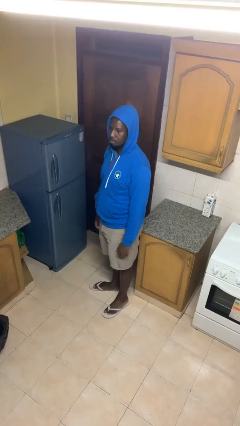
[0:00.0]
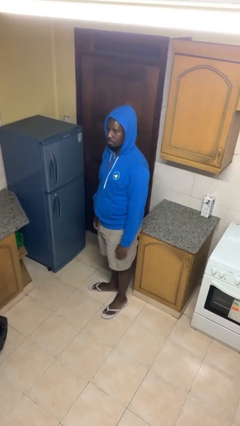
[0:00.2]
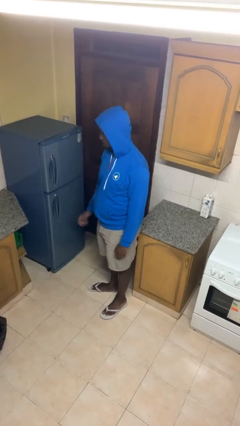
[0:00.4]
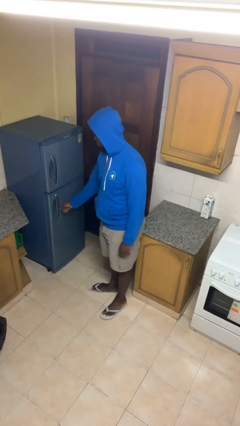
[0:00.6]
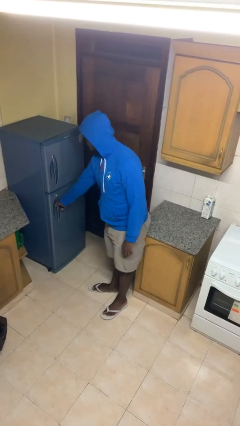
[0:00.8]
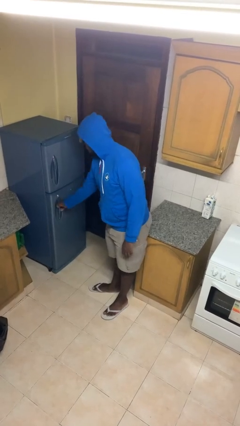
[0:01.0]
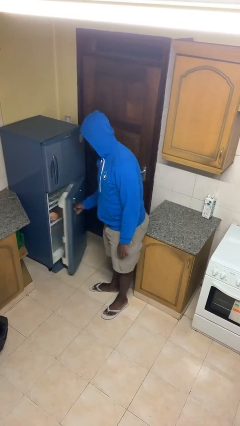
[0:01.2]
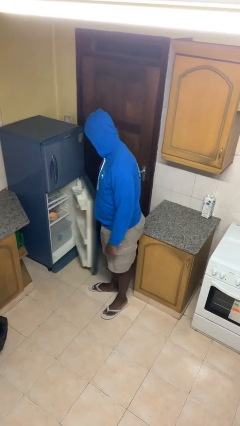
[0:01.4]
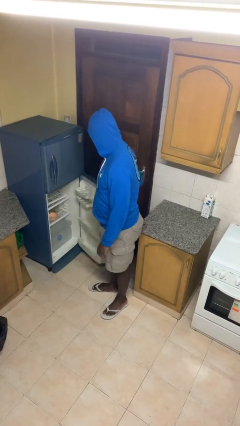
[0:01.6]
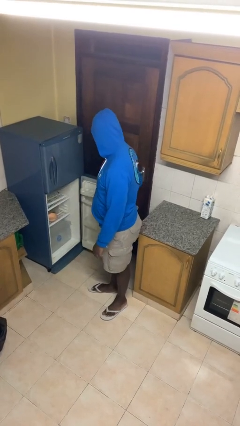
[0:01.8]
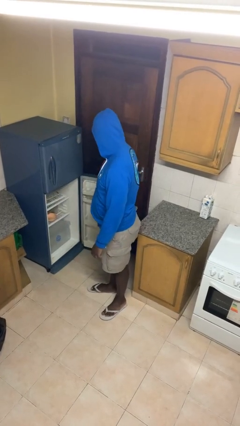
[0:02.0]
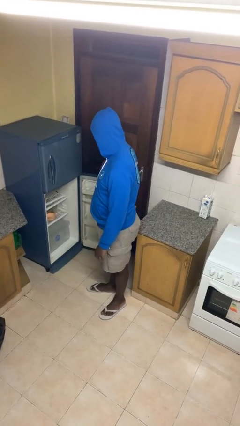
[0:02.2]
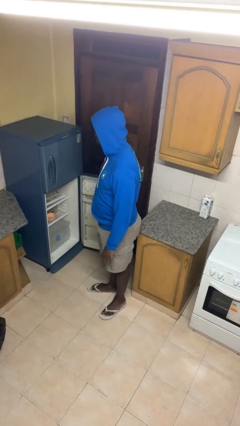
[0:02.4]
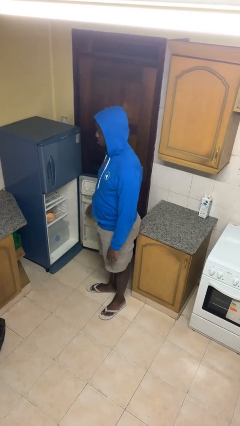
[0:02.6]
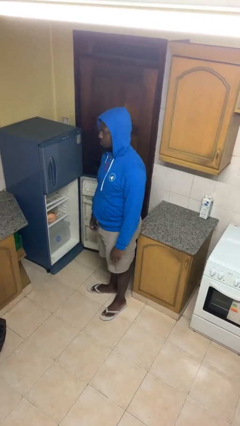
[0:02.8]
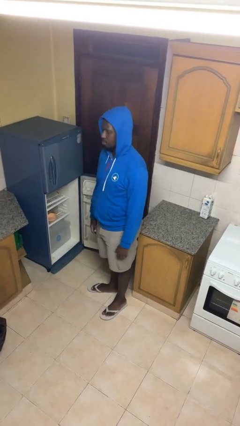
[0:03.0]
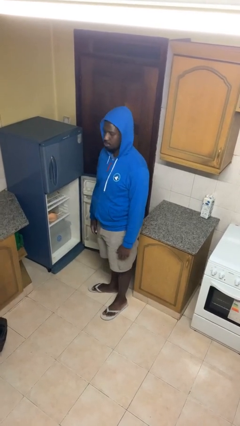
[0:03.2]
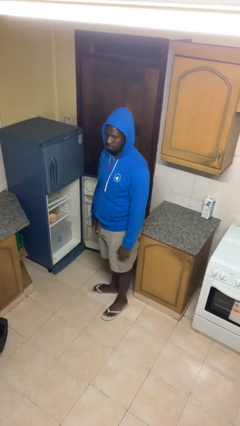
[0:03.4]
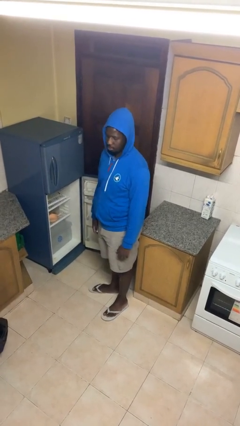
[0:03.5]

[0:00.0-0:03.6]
person opens refrigerator

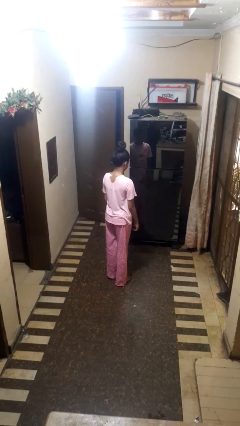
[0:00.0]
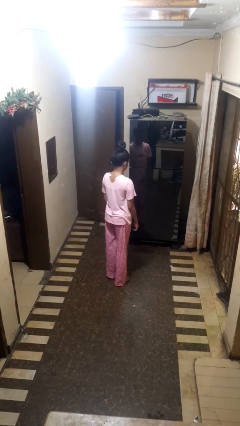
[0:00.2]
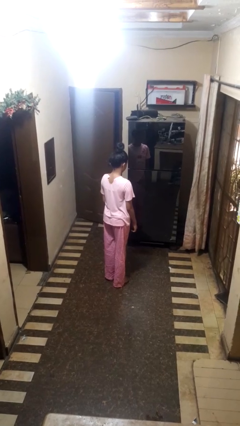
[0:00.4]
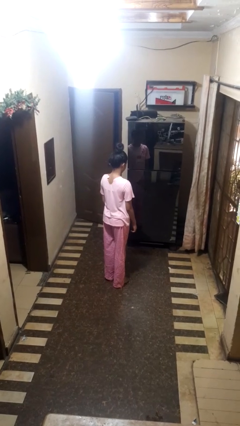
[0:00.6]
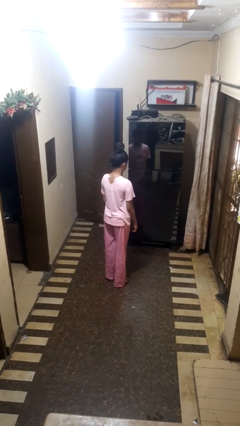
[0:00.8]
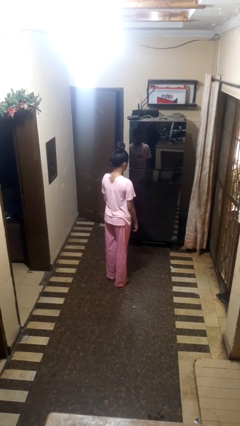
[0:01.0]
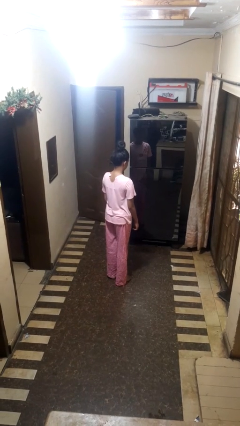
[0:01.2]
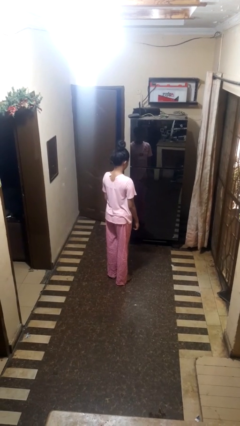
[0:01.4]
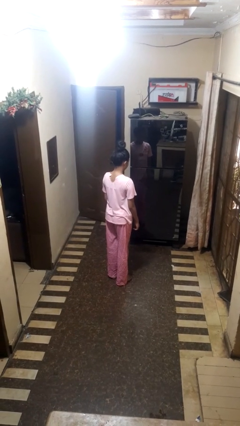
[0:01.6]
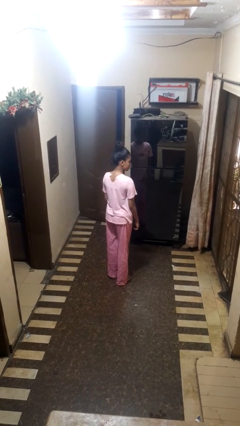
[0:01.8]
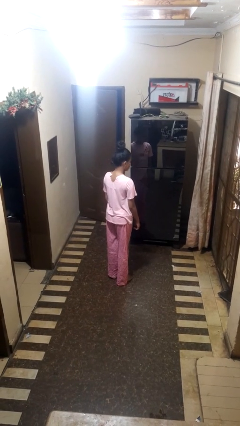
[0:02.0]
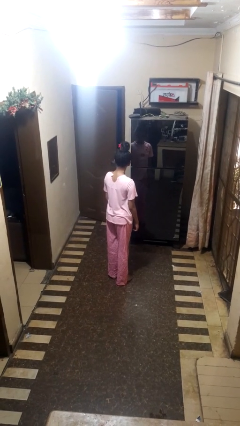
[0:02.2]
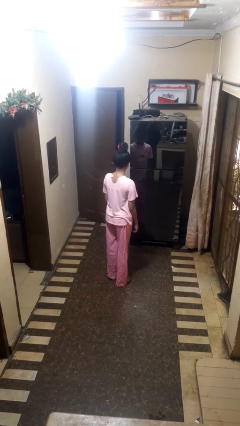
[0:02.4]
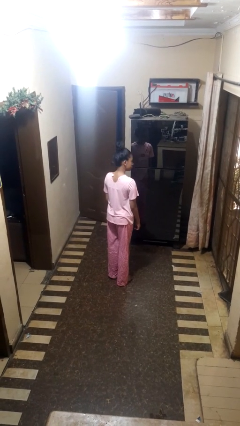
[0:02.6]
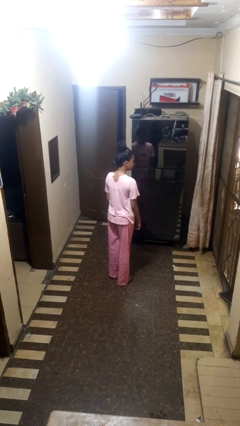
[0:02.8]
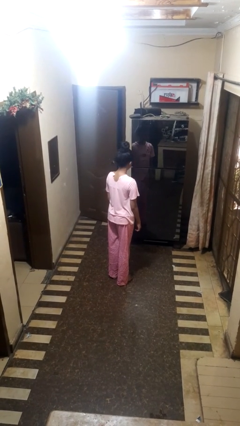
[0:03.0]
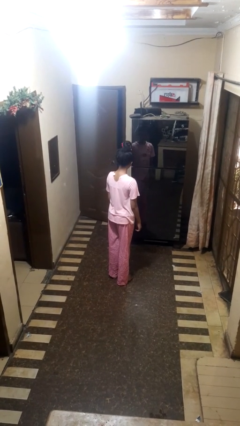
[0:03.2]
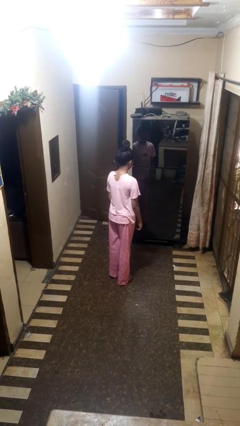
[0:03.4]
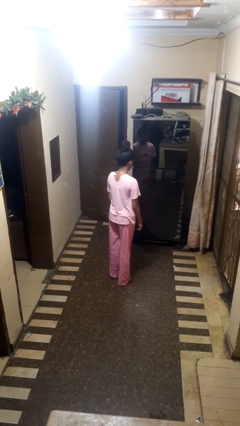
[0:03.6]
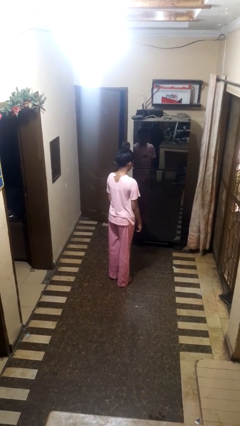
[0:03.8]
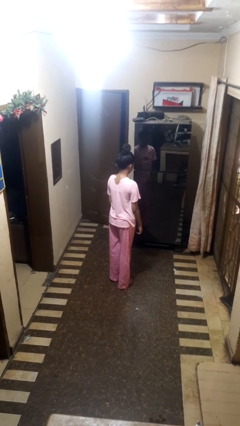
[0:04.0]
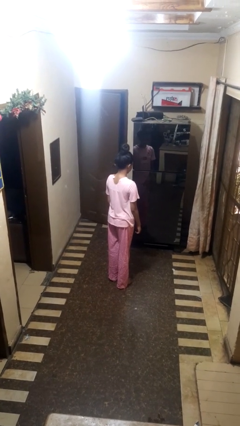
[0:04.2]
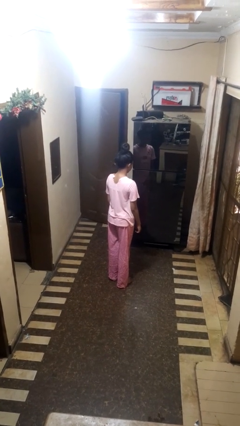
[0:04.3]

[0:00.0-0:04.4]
person nods head

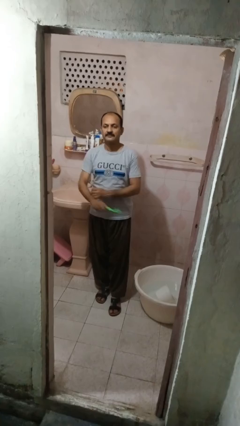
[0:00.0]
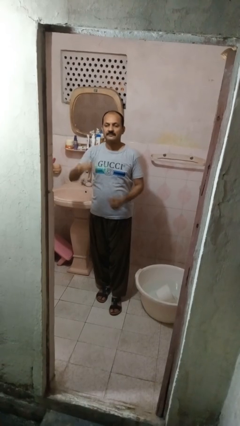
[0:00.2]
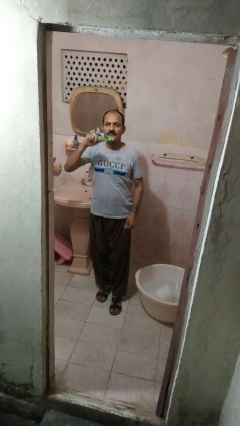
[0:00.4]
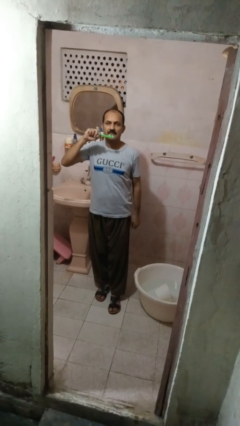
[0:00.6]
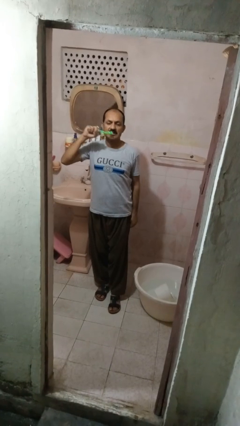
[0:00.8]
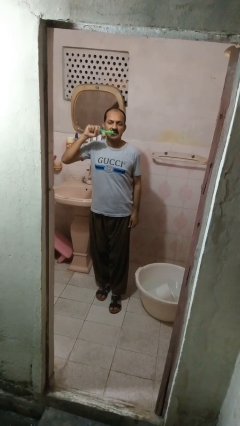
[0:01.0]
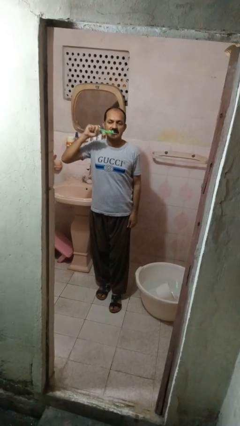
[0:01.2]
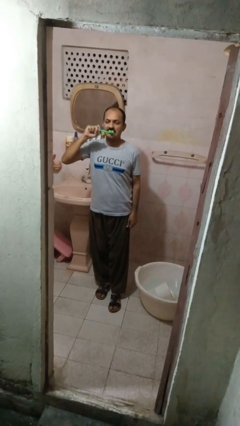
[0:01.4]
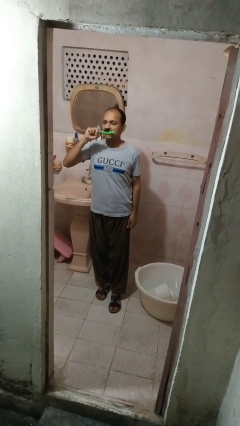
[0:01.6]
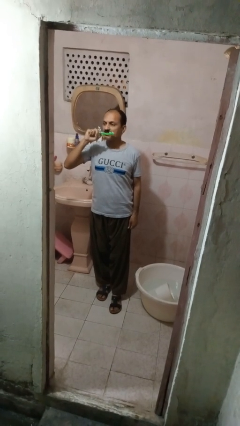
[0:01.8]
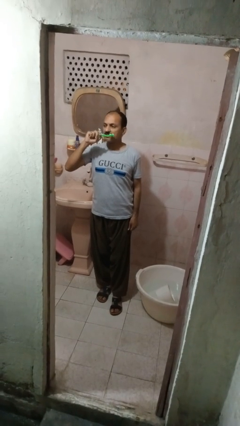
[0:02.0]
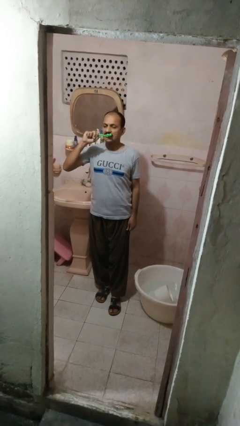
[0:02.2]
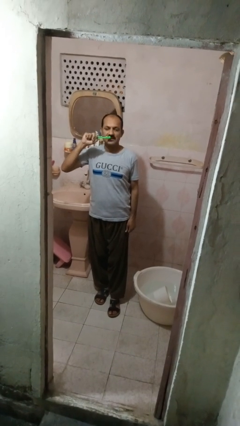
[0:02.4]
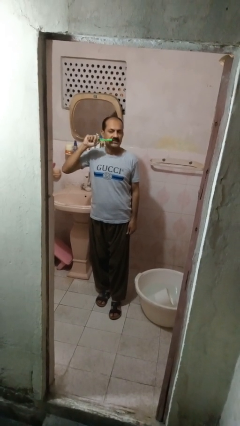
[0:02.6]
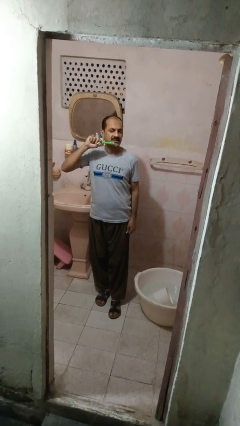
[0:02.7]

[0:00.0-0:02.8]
person brushes teeth

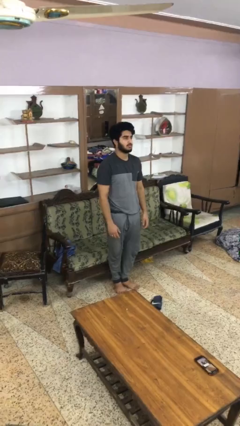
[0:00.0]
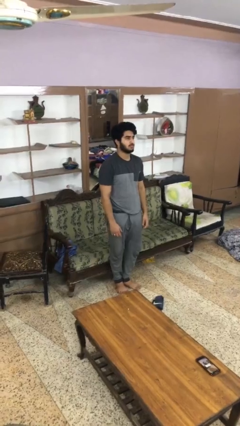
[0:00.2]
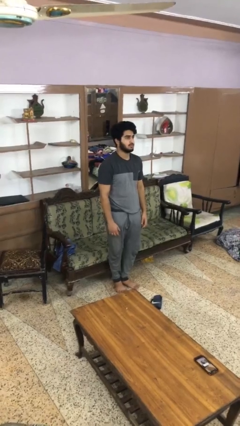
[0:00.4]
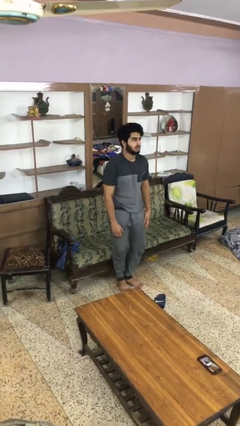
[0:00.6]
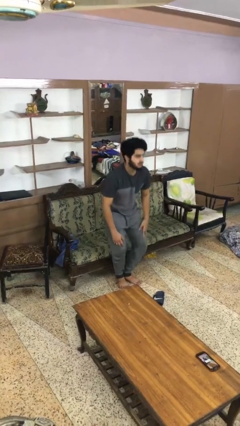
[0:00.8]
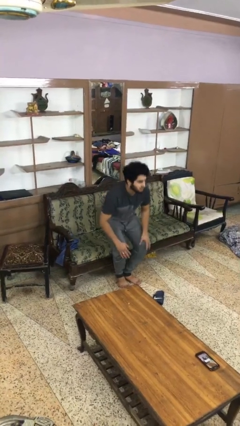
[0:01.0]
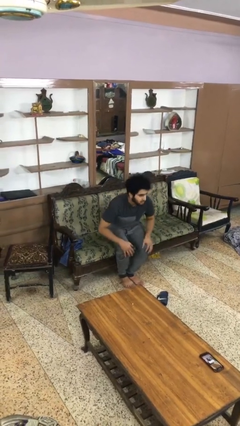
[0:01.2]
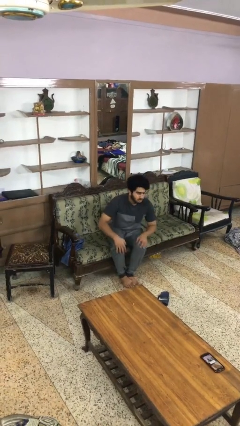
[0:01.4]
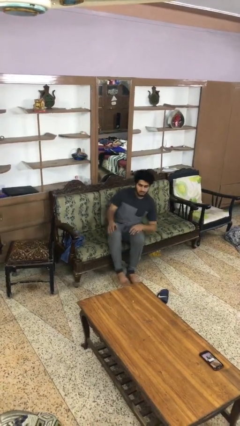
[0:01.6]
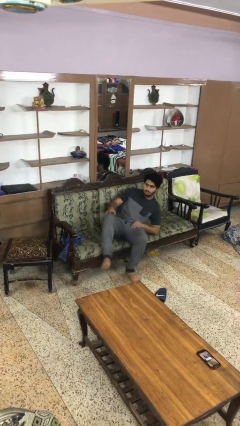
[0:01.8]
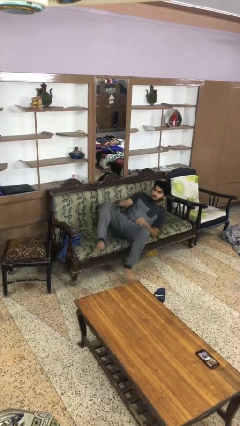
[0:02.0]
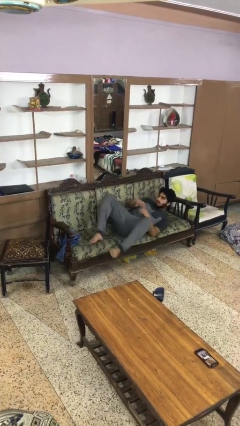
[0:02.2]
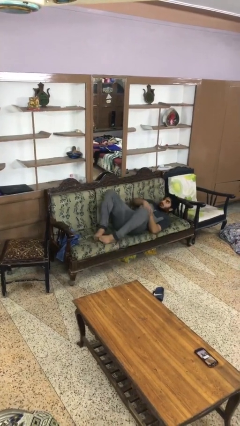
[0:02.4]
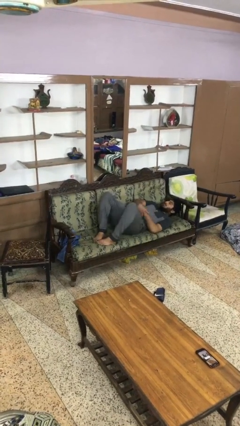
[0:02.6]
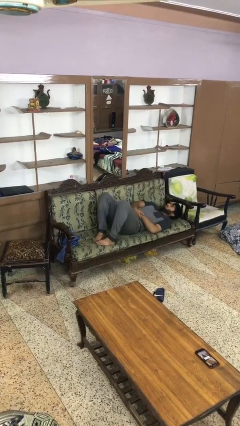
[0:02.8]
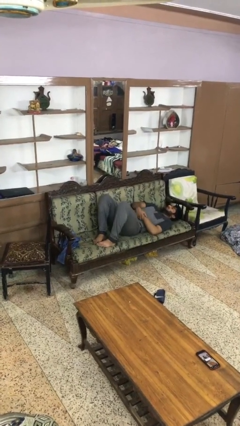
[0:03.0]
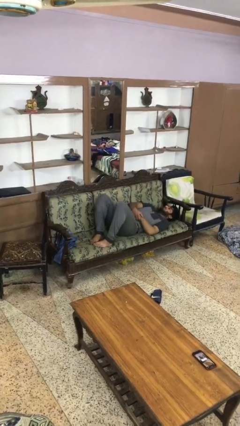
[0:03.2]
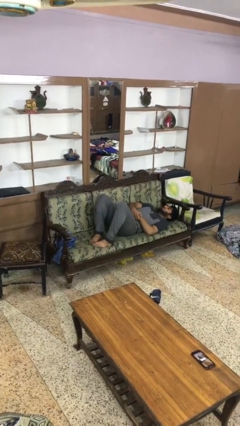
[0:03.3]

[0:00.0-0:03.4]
person lies down on couch

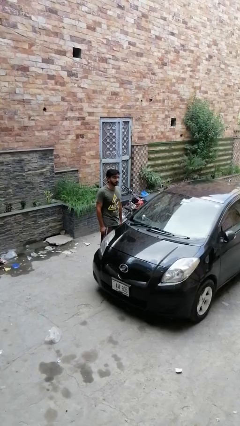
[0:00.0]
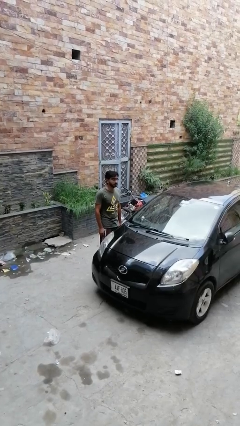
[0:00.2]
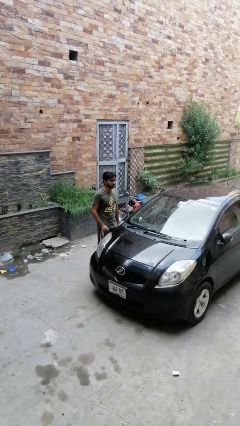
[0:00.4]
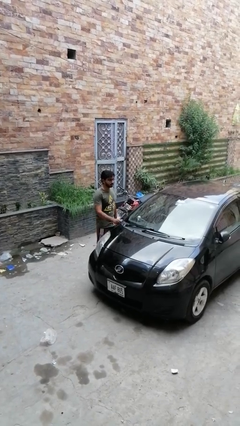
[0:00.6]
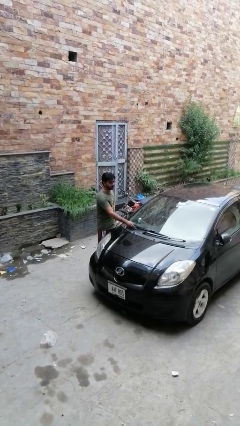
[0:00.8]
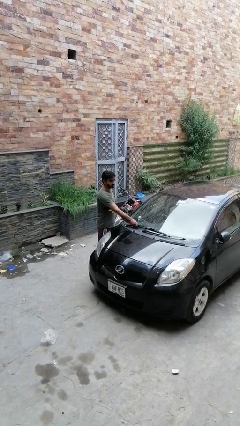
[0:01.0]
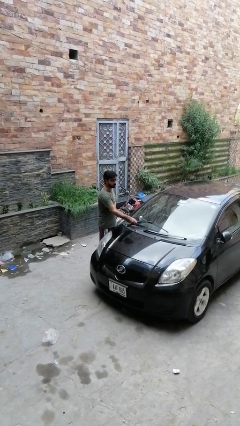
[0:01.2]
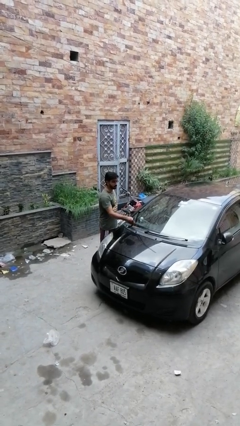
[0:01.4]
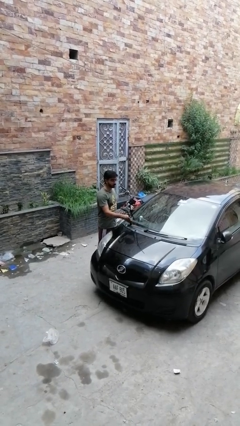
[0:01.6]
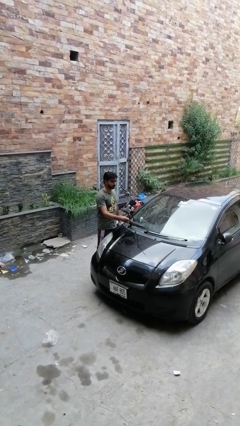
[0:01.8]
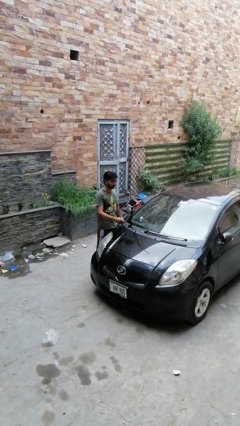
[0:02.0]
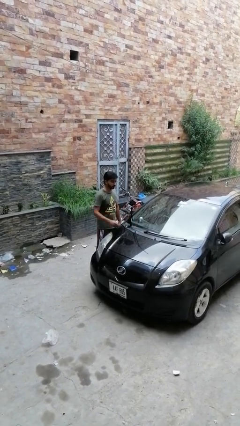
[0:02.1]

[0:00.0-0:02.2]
person flips up car wipers

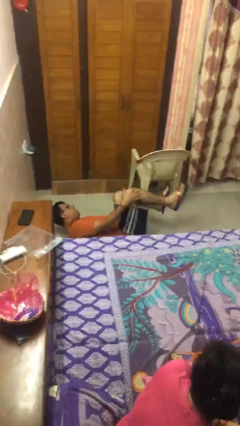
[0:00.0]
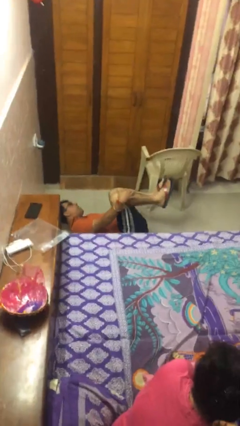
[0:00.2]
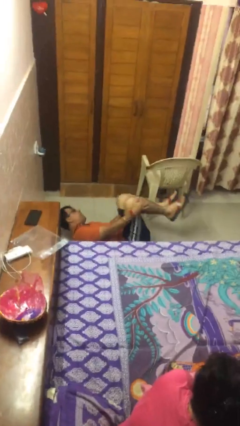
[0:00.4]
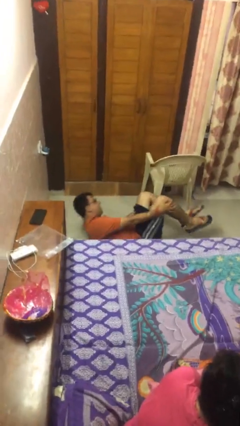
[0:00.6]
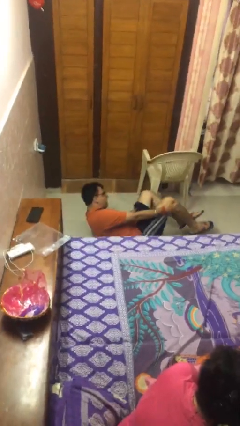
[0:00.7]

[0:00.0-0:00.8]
person lies down on floor
